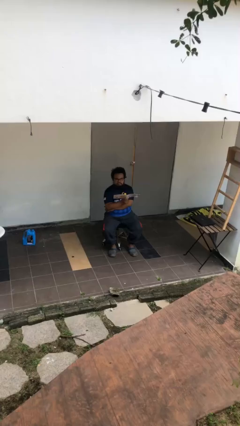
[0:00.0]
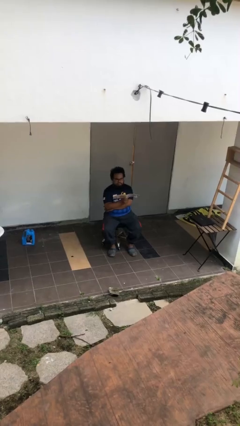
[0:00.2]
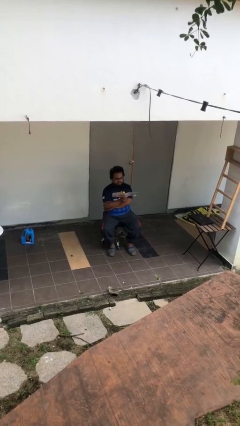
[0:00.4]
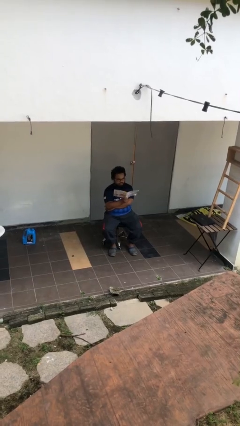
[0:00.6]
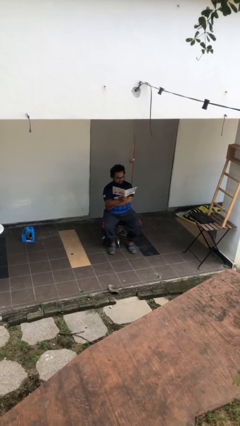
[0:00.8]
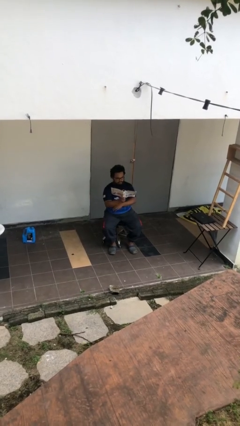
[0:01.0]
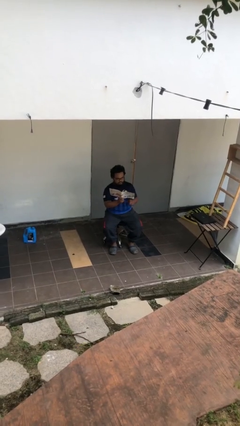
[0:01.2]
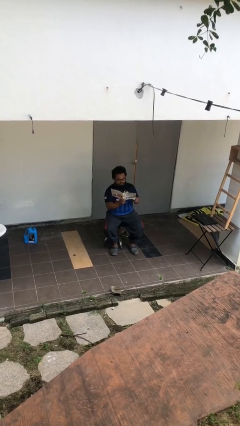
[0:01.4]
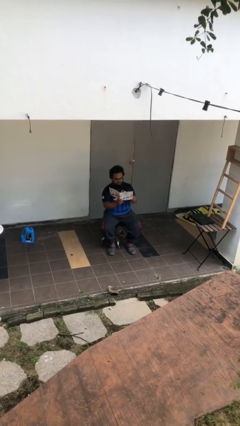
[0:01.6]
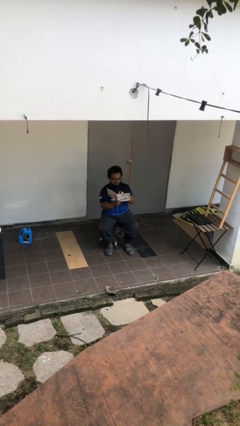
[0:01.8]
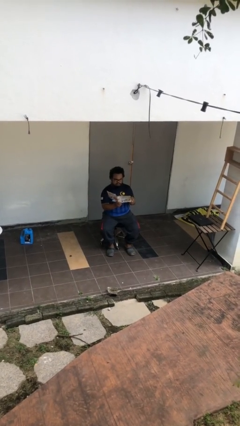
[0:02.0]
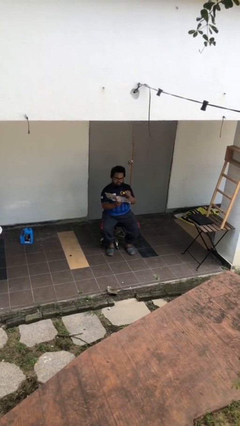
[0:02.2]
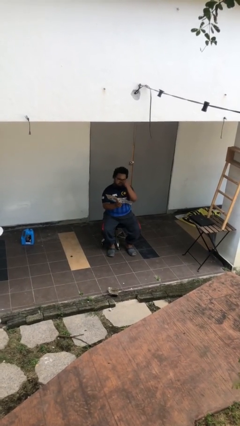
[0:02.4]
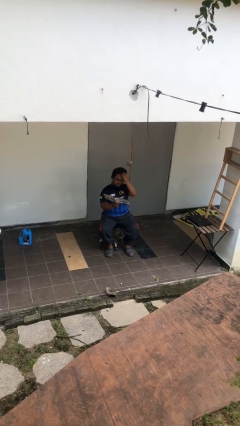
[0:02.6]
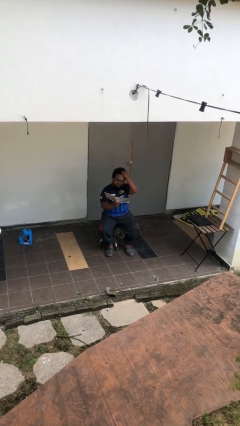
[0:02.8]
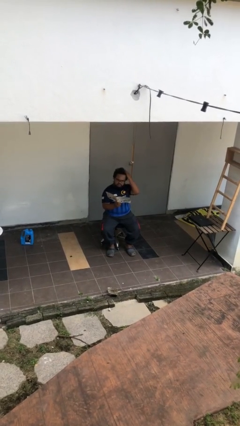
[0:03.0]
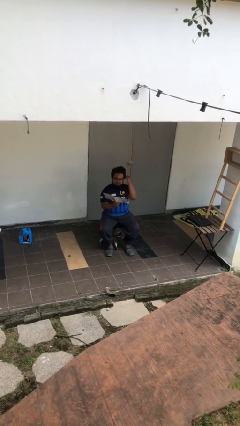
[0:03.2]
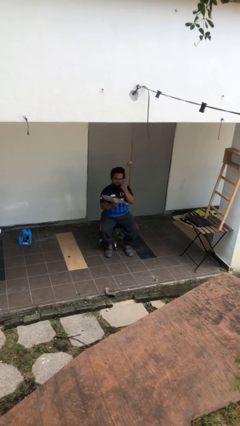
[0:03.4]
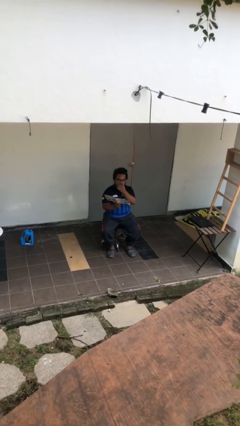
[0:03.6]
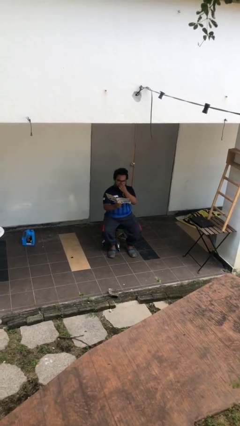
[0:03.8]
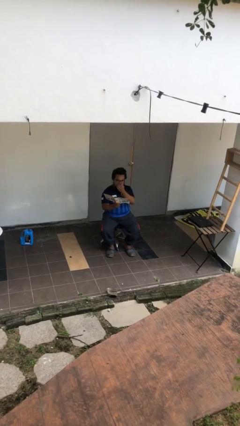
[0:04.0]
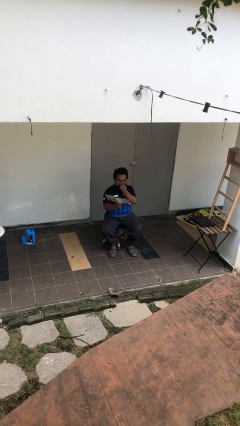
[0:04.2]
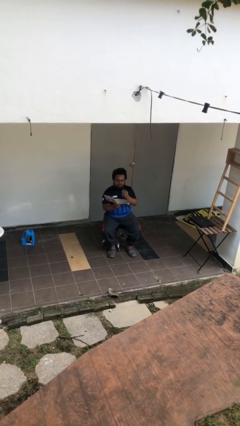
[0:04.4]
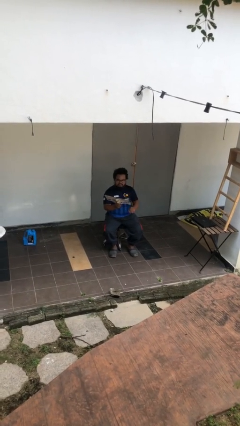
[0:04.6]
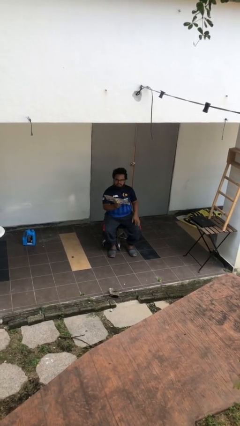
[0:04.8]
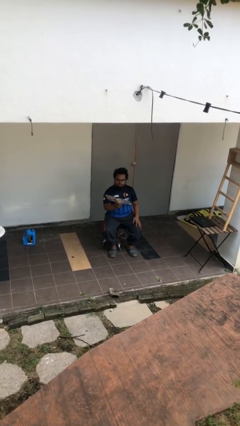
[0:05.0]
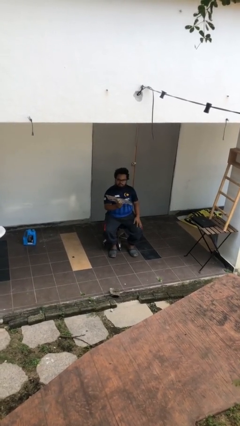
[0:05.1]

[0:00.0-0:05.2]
person reads document

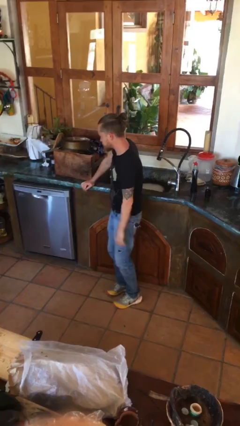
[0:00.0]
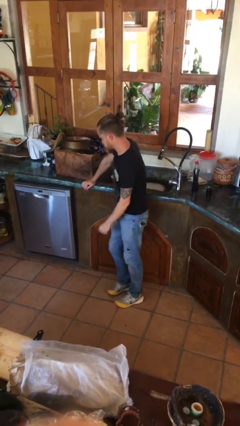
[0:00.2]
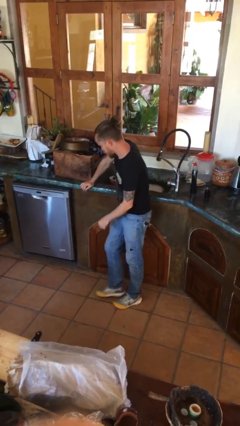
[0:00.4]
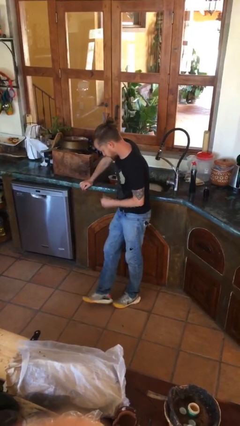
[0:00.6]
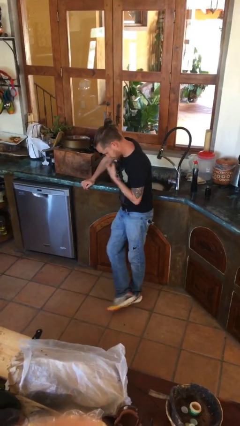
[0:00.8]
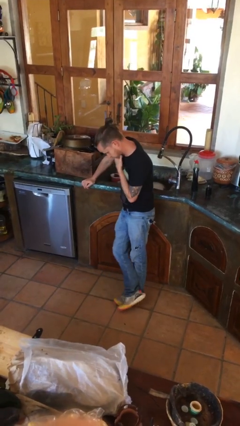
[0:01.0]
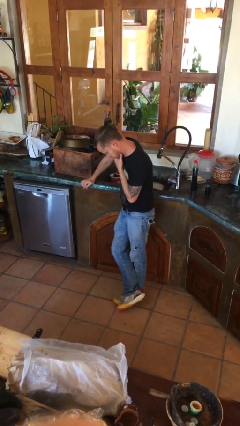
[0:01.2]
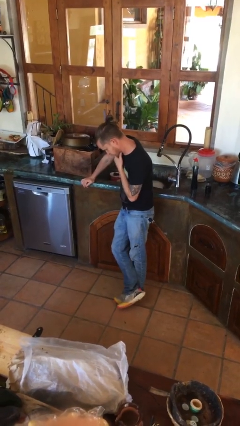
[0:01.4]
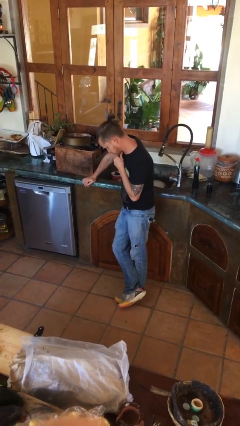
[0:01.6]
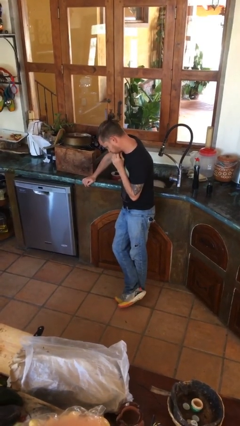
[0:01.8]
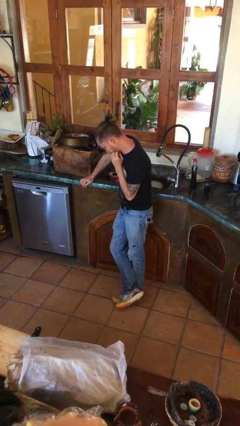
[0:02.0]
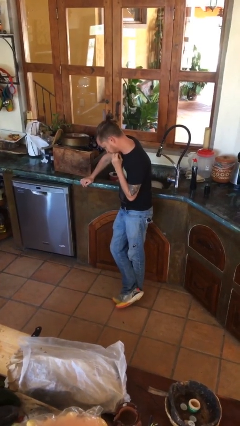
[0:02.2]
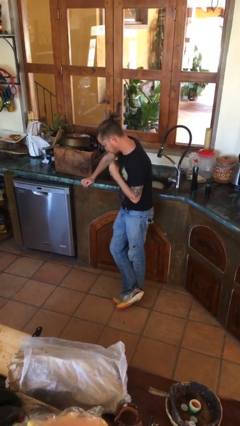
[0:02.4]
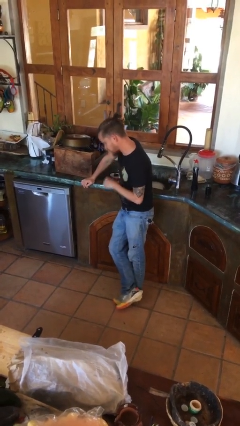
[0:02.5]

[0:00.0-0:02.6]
person strokes chin

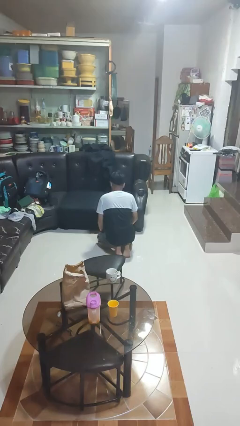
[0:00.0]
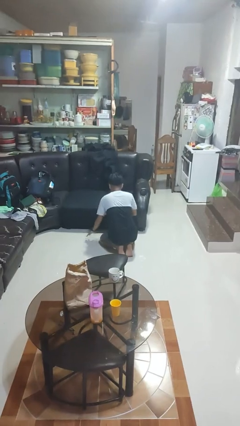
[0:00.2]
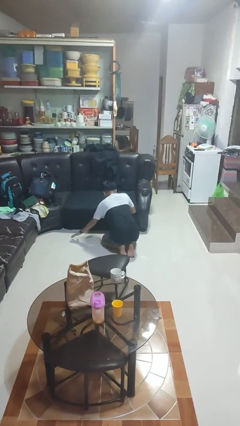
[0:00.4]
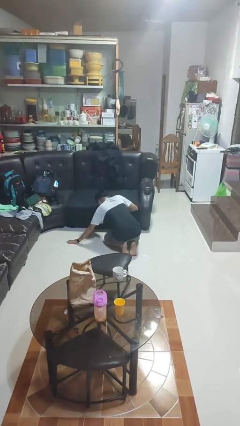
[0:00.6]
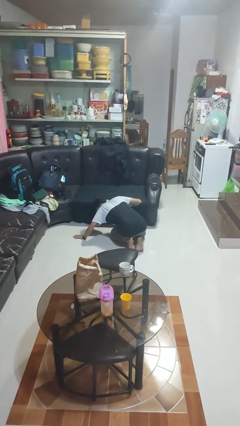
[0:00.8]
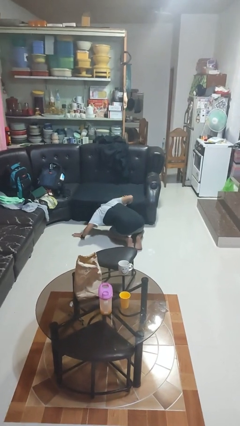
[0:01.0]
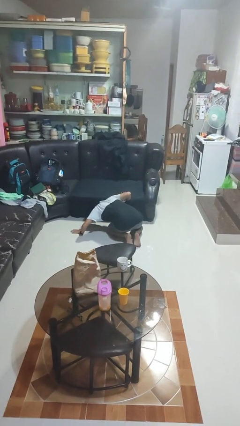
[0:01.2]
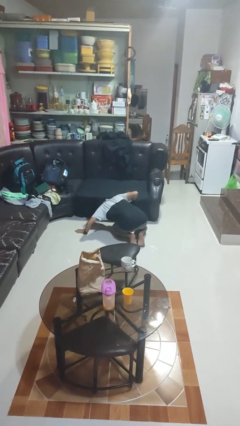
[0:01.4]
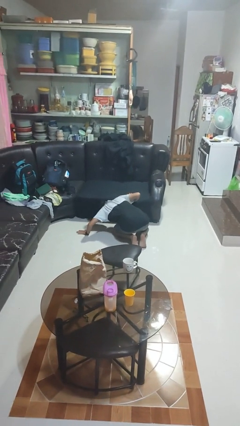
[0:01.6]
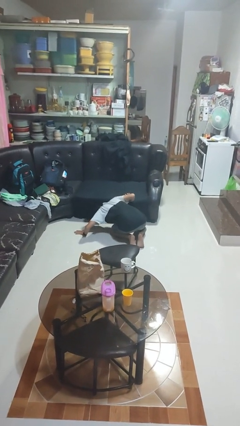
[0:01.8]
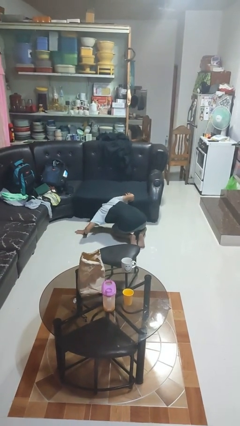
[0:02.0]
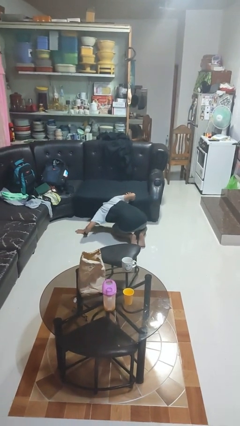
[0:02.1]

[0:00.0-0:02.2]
person searches under couch

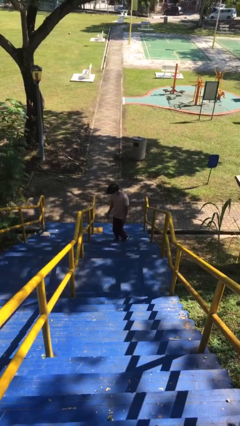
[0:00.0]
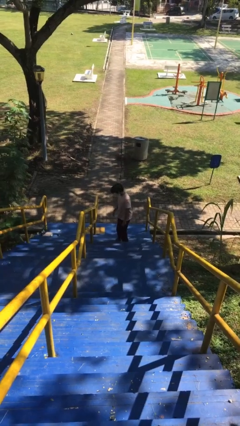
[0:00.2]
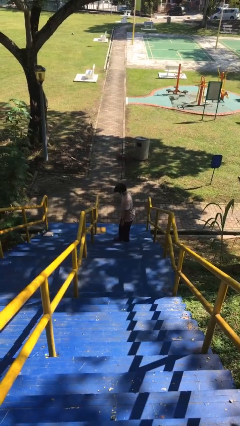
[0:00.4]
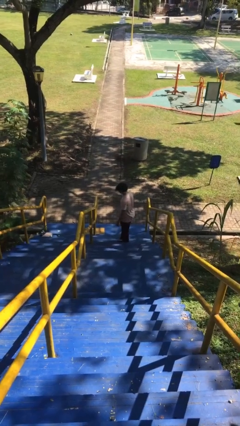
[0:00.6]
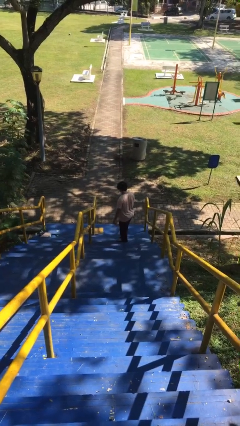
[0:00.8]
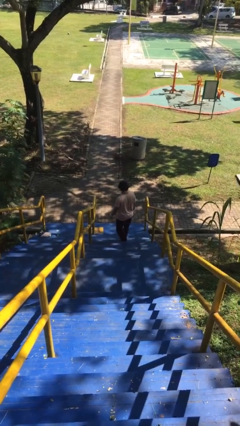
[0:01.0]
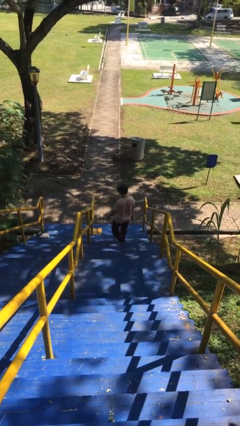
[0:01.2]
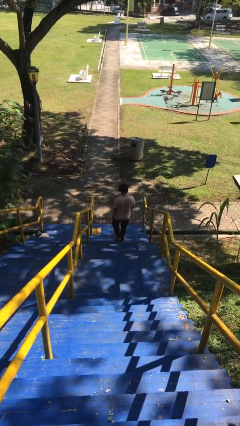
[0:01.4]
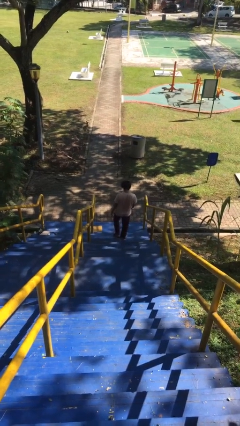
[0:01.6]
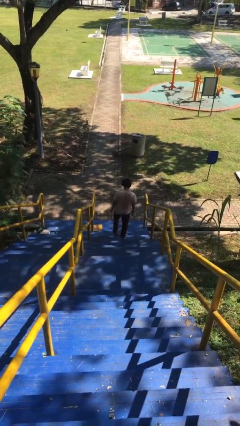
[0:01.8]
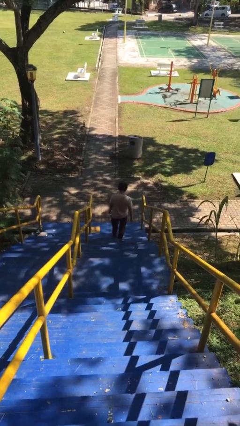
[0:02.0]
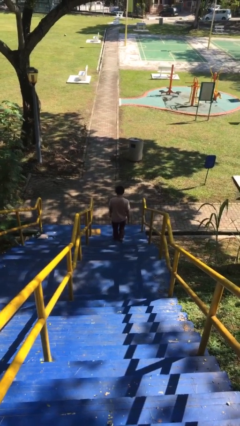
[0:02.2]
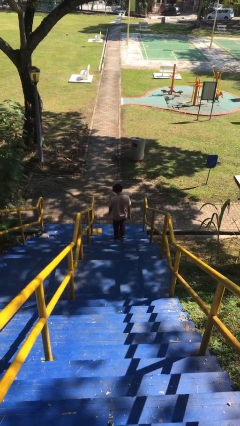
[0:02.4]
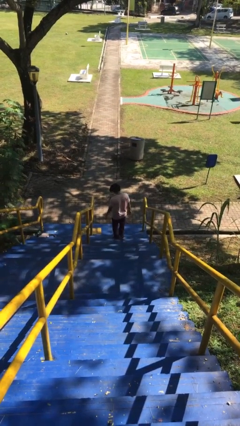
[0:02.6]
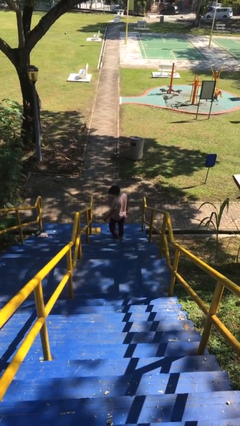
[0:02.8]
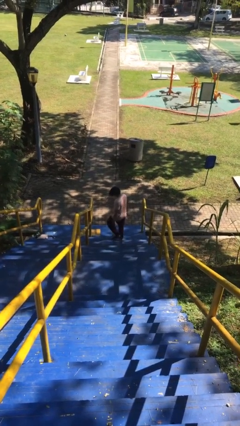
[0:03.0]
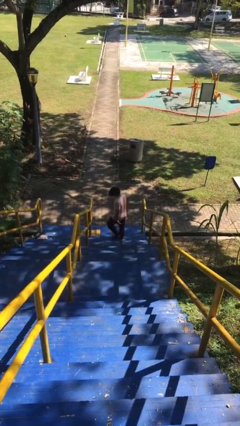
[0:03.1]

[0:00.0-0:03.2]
person climbs down stairs

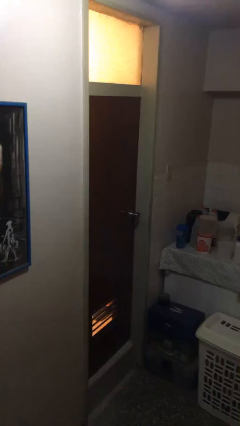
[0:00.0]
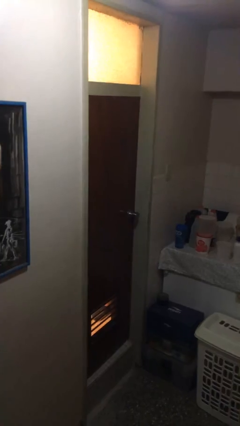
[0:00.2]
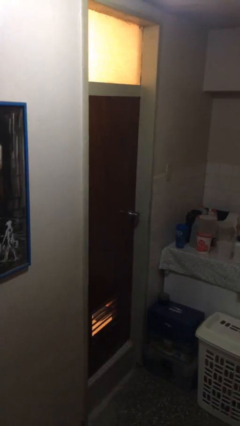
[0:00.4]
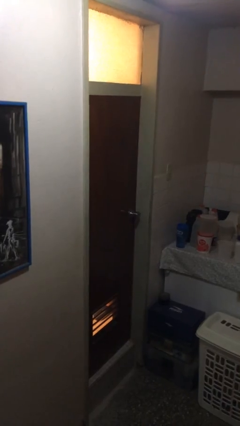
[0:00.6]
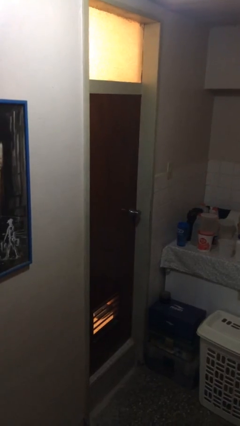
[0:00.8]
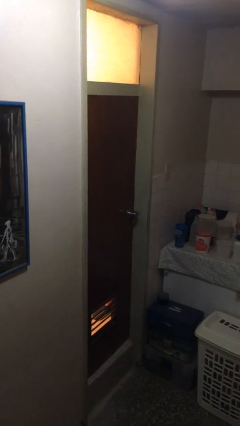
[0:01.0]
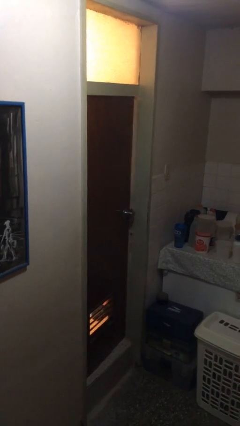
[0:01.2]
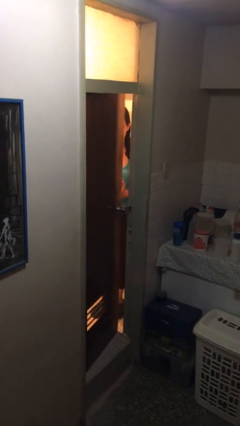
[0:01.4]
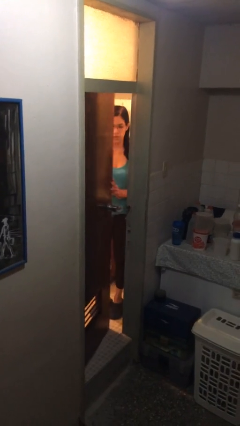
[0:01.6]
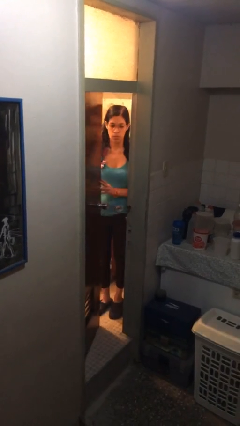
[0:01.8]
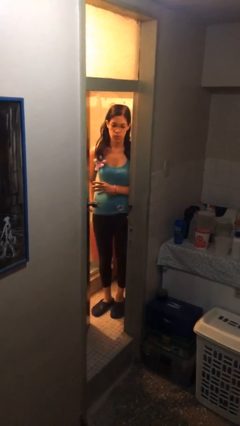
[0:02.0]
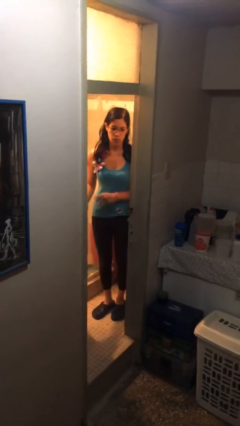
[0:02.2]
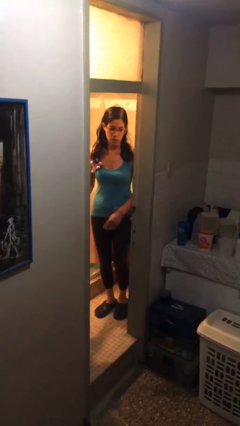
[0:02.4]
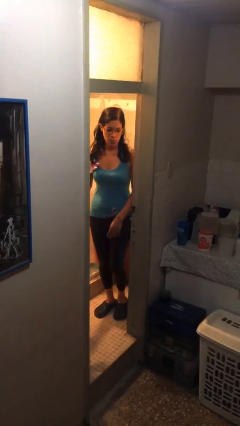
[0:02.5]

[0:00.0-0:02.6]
person opens facility door

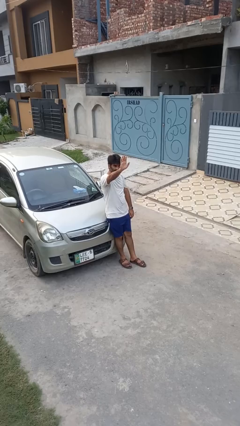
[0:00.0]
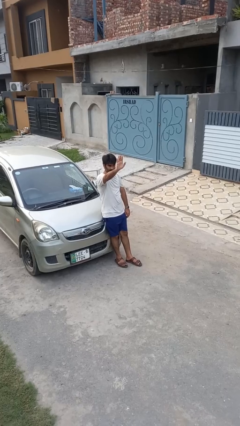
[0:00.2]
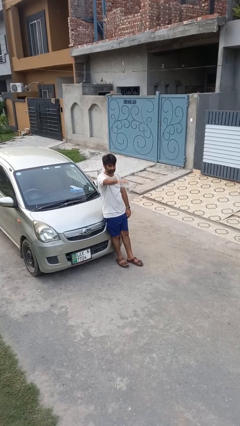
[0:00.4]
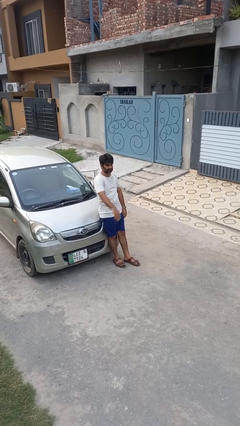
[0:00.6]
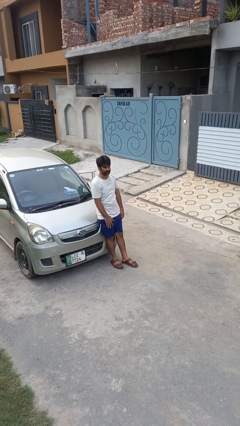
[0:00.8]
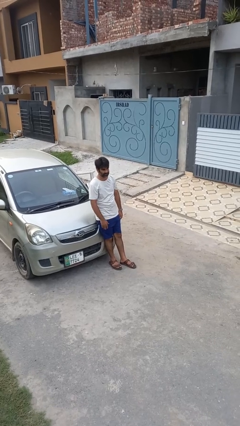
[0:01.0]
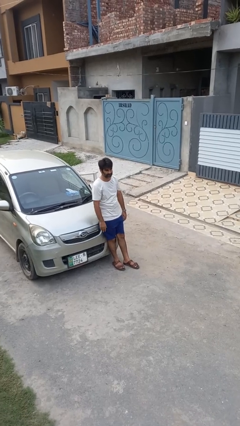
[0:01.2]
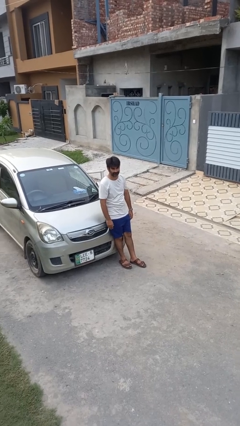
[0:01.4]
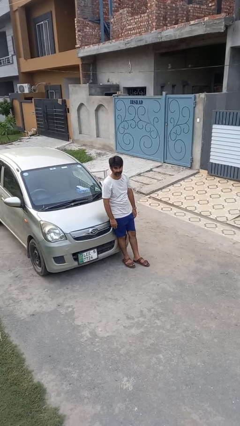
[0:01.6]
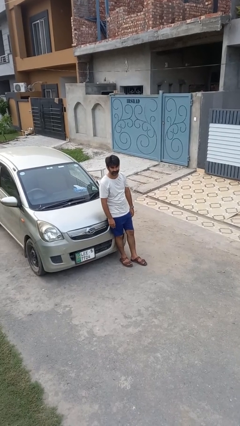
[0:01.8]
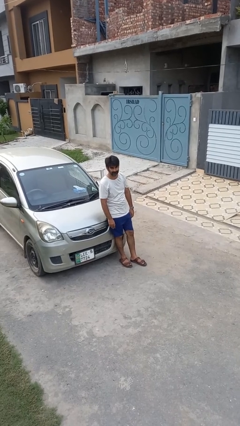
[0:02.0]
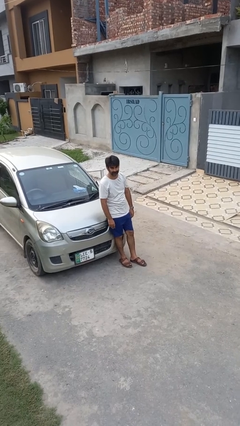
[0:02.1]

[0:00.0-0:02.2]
person gestures lower hand
